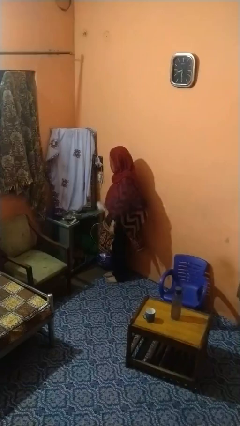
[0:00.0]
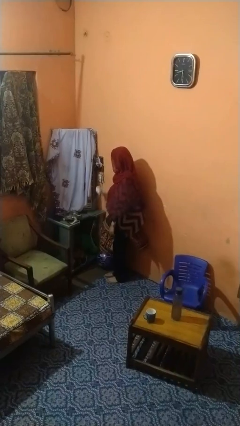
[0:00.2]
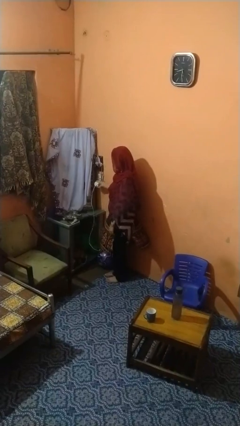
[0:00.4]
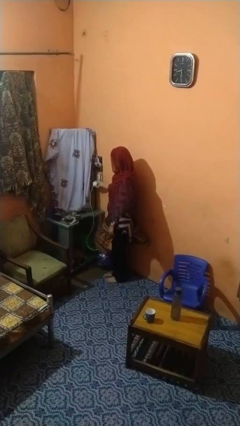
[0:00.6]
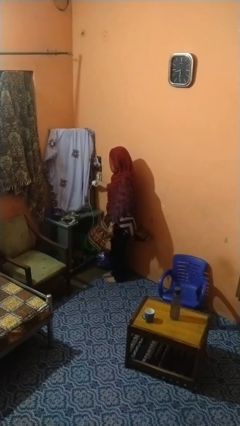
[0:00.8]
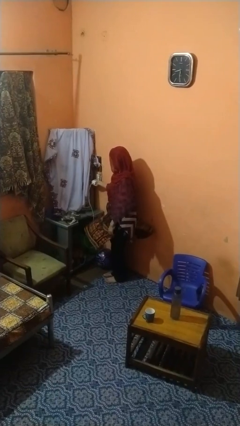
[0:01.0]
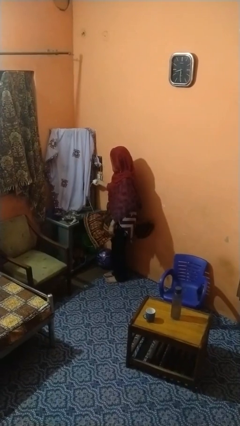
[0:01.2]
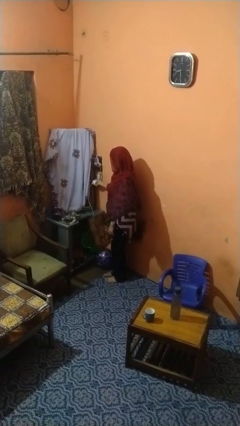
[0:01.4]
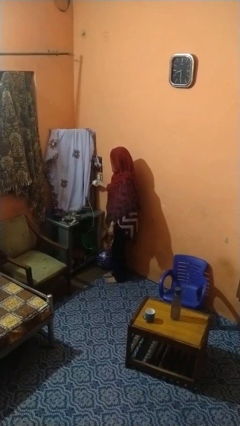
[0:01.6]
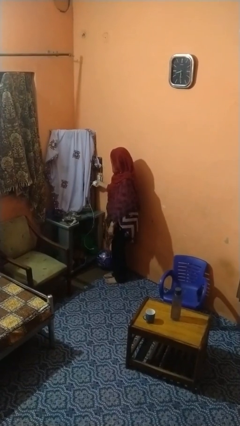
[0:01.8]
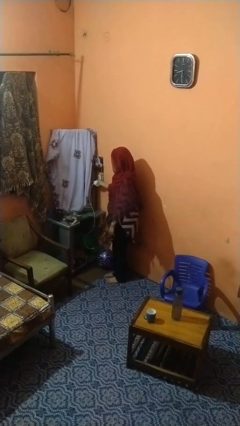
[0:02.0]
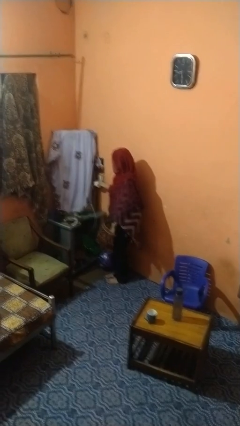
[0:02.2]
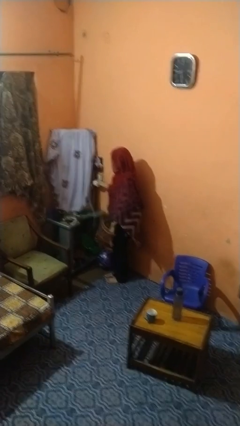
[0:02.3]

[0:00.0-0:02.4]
person plugs into electrical socket

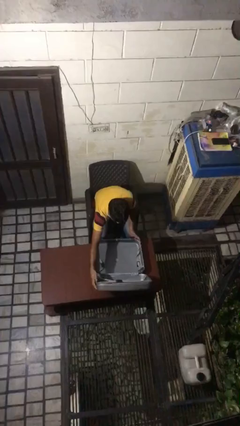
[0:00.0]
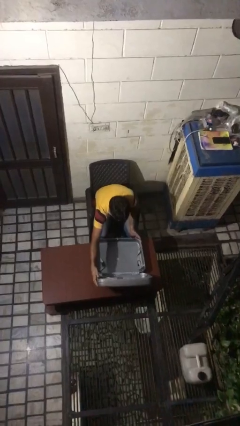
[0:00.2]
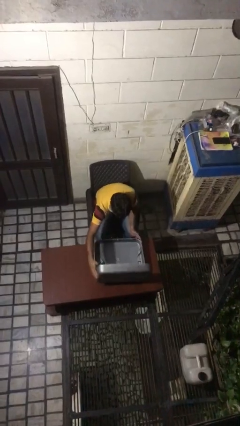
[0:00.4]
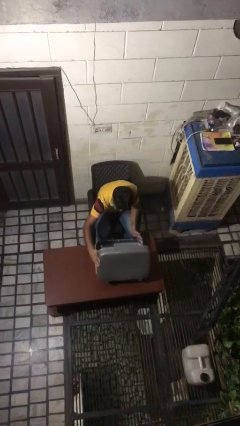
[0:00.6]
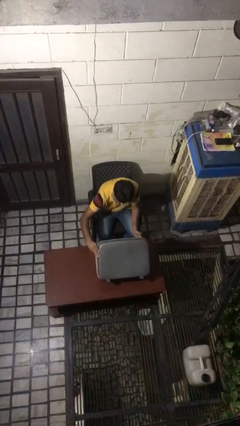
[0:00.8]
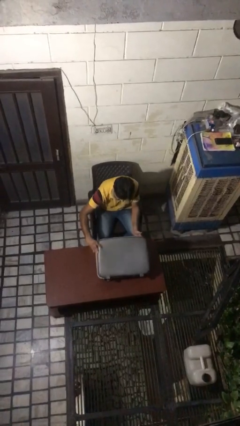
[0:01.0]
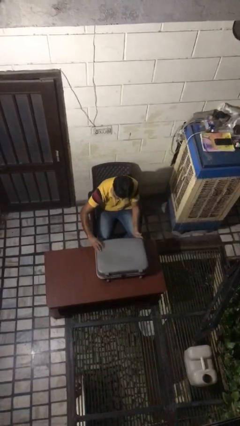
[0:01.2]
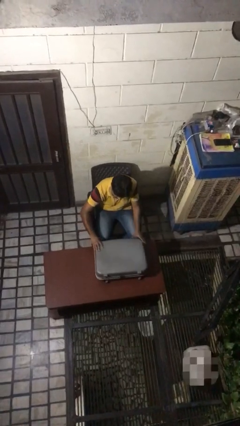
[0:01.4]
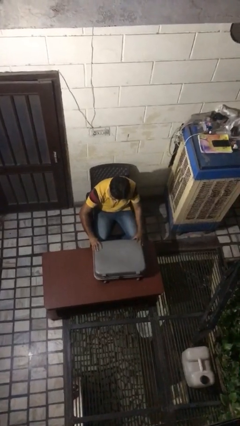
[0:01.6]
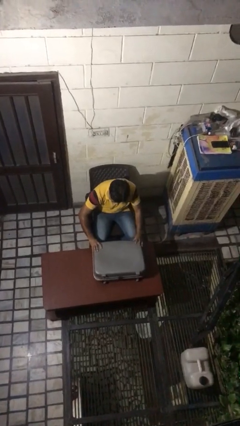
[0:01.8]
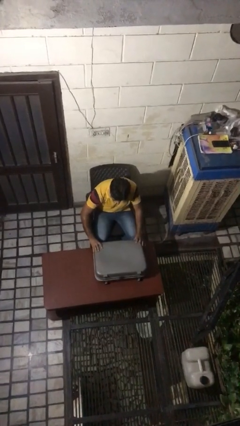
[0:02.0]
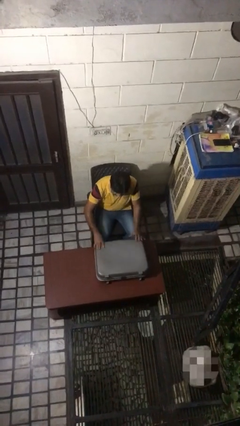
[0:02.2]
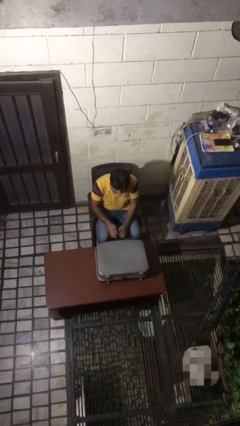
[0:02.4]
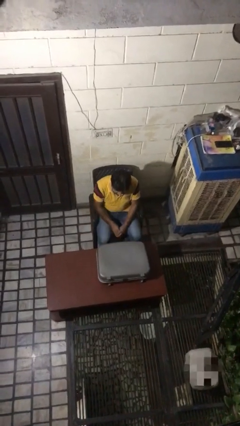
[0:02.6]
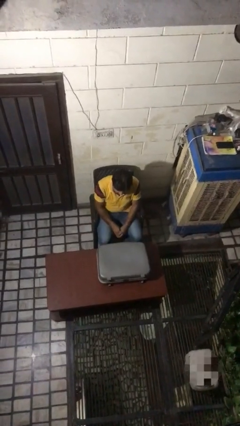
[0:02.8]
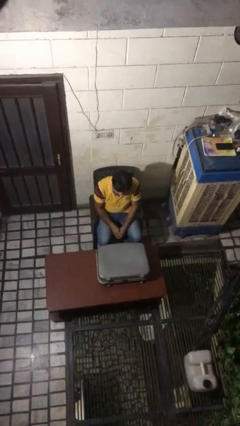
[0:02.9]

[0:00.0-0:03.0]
person closes suitcase

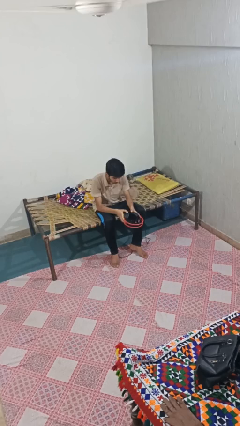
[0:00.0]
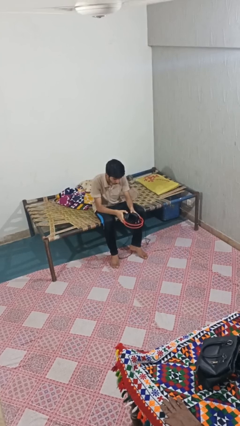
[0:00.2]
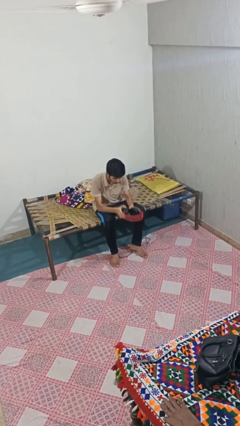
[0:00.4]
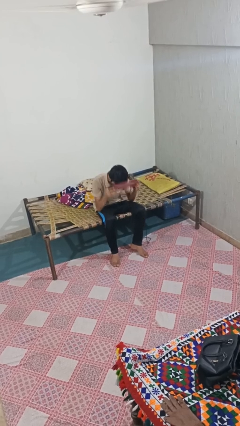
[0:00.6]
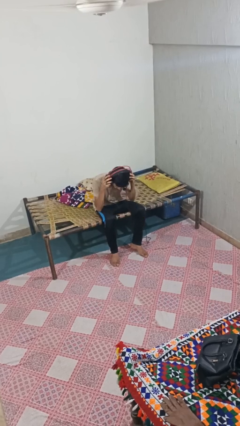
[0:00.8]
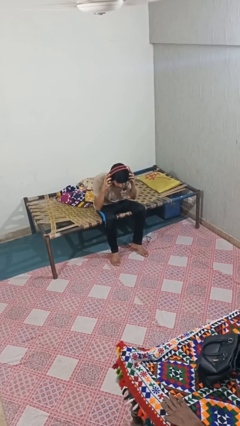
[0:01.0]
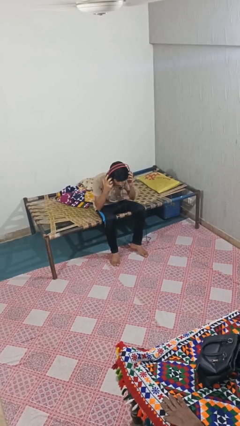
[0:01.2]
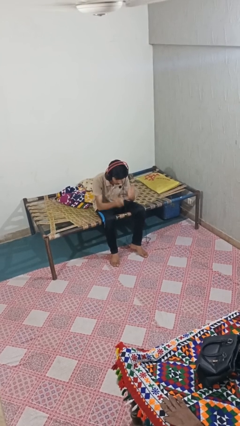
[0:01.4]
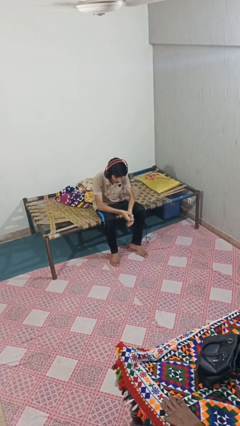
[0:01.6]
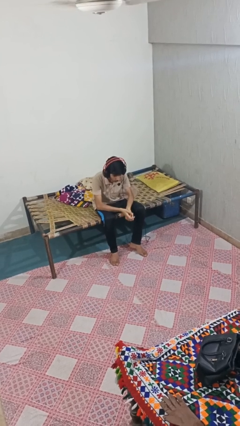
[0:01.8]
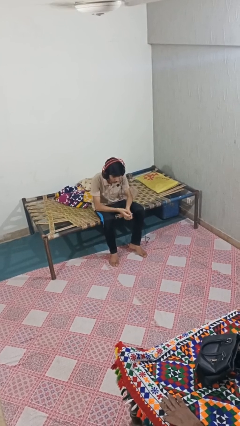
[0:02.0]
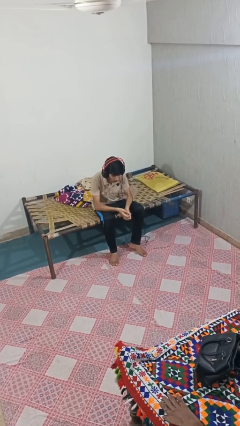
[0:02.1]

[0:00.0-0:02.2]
person puts on headphones

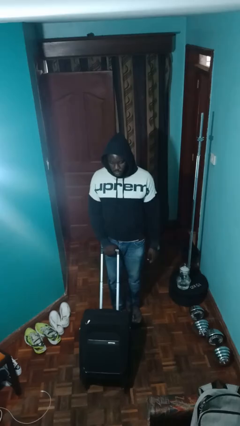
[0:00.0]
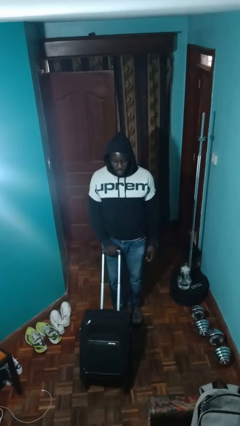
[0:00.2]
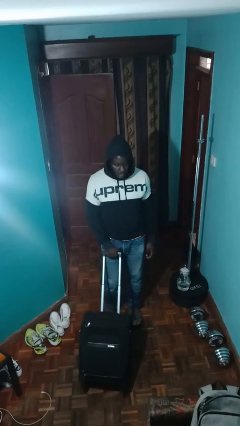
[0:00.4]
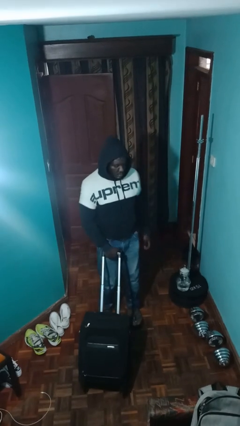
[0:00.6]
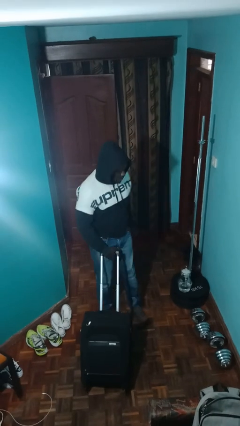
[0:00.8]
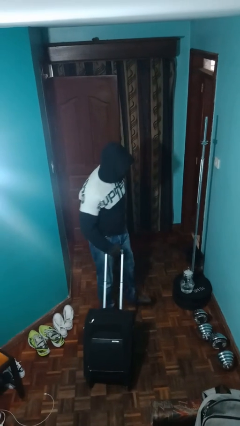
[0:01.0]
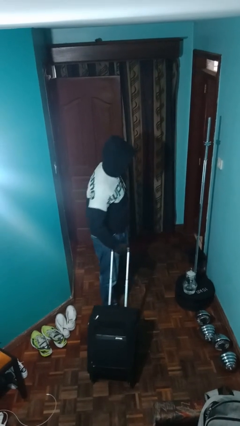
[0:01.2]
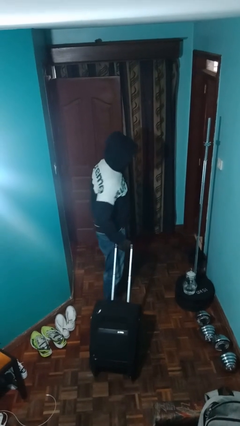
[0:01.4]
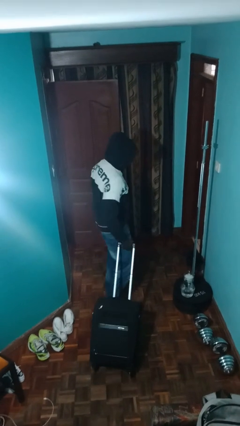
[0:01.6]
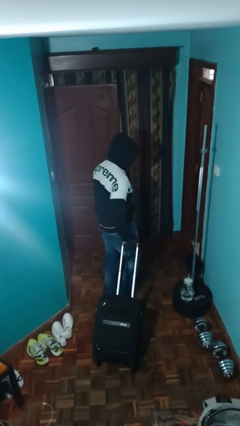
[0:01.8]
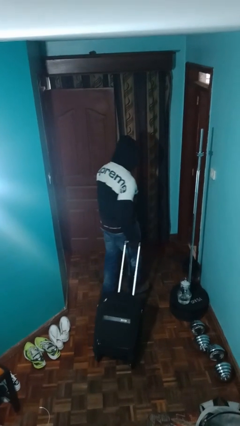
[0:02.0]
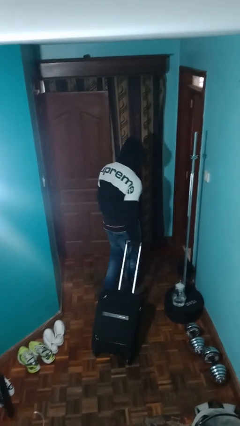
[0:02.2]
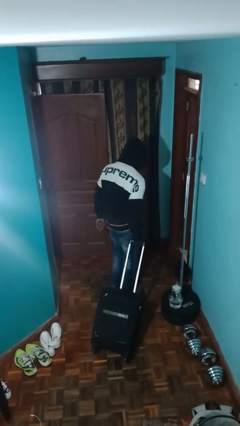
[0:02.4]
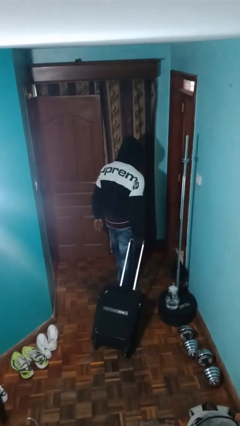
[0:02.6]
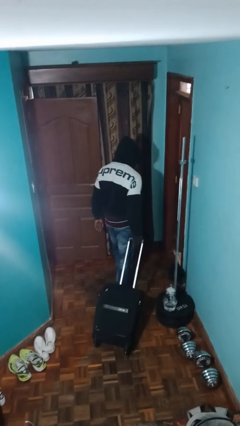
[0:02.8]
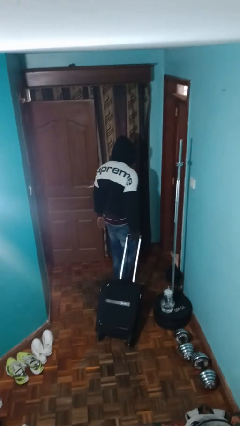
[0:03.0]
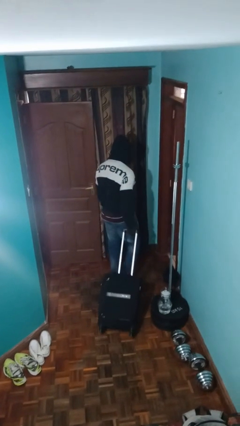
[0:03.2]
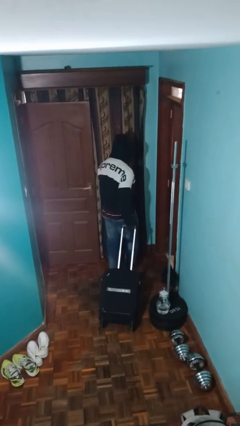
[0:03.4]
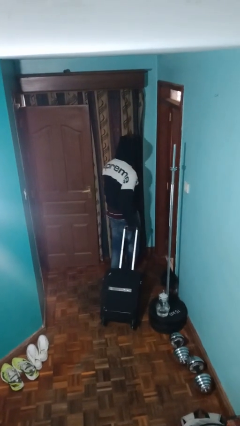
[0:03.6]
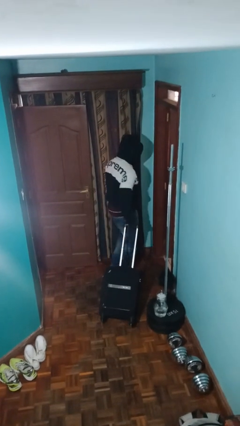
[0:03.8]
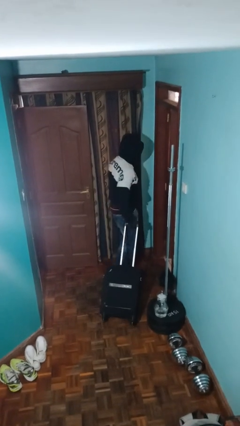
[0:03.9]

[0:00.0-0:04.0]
person pulls wheeled cart

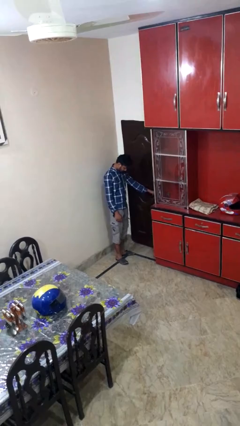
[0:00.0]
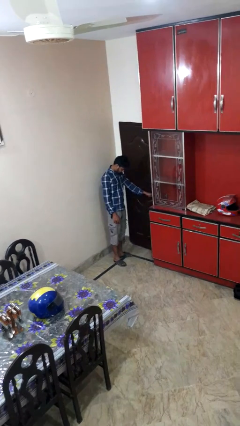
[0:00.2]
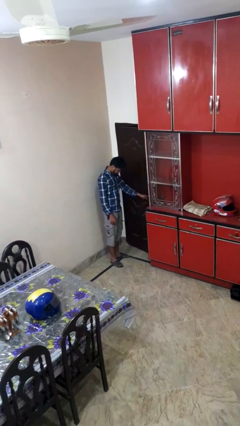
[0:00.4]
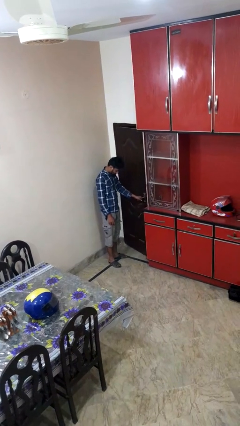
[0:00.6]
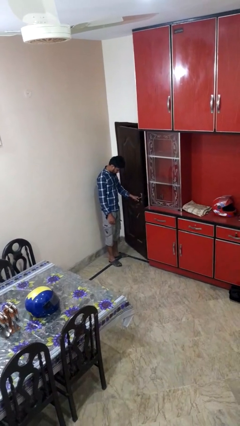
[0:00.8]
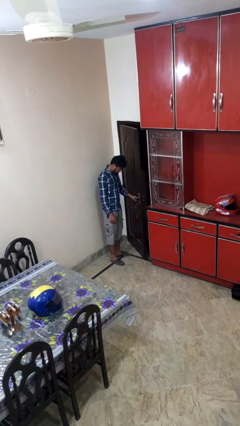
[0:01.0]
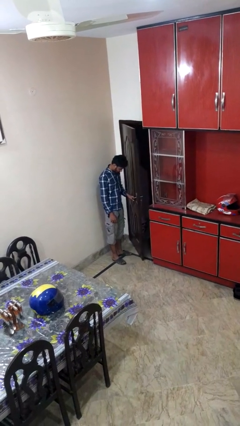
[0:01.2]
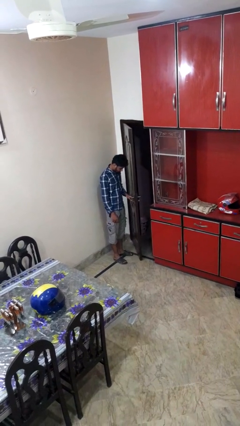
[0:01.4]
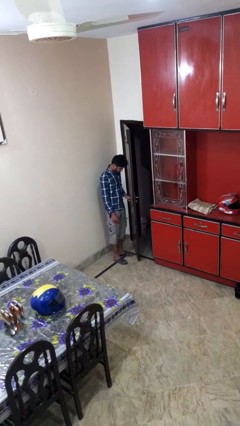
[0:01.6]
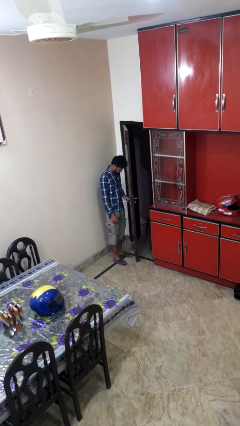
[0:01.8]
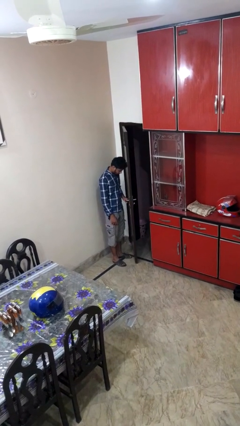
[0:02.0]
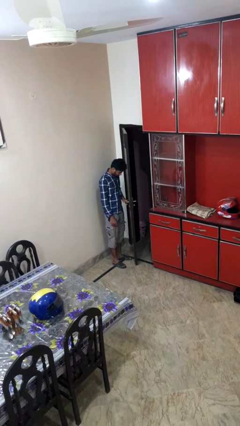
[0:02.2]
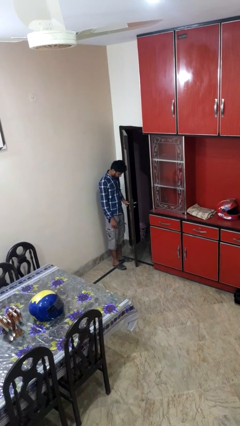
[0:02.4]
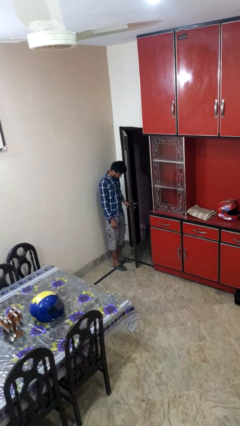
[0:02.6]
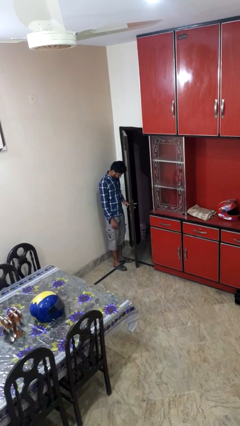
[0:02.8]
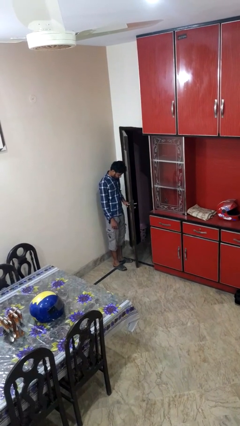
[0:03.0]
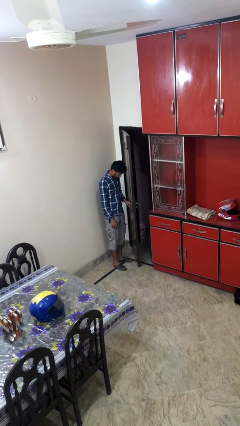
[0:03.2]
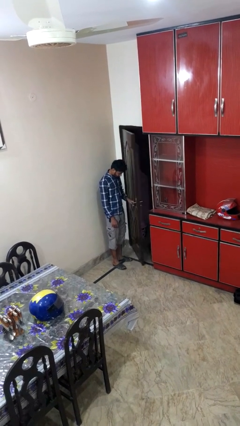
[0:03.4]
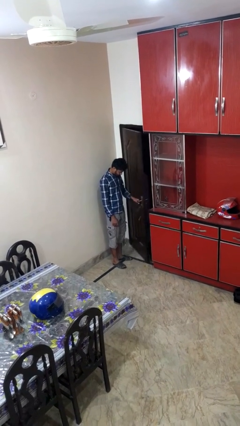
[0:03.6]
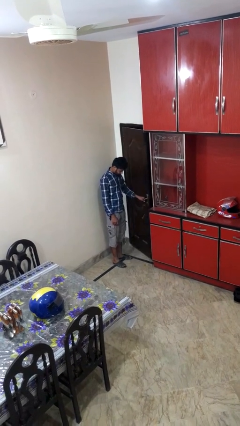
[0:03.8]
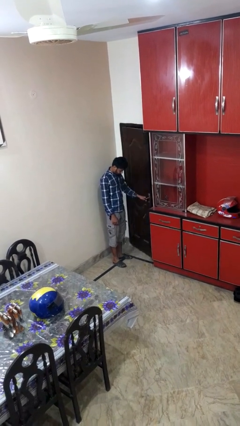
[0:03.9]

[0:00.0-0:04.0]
person opens facility door

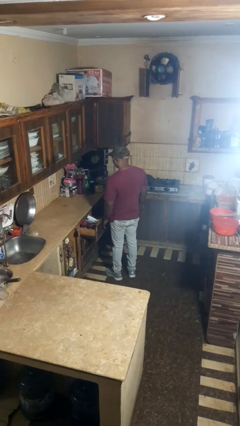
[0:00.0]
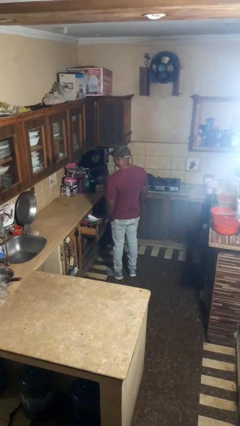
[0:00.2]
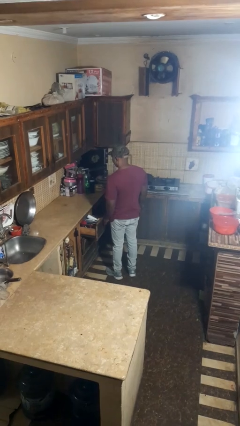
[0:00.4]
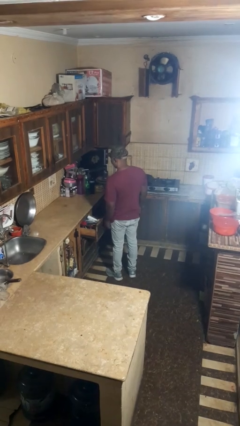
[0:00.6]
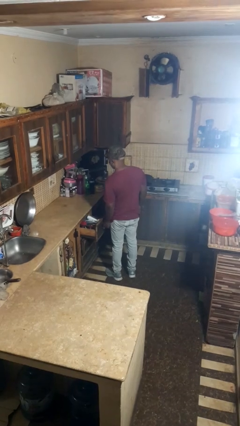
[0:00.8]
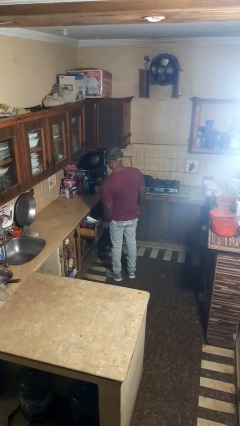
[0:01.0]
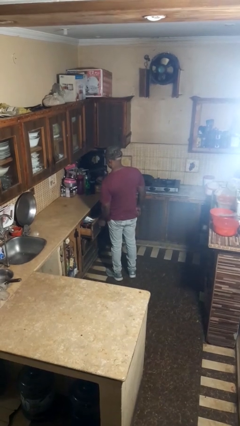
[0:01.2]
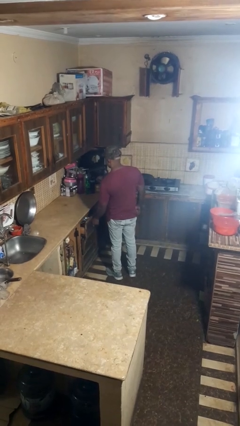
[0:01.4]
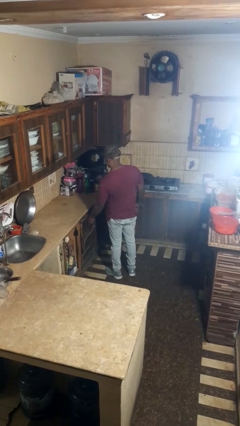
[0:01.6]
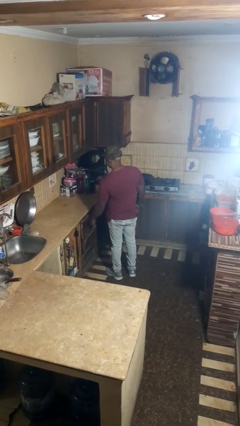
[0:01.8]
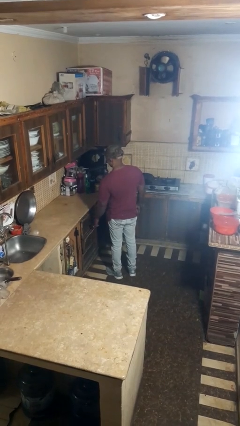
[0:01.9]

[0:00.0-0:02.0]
person closes kitchen drawer
